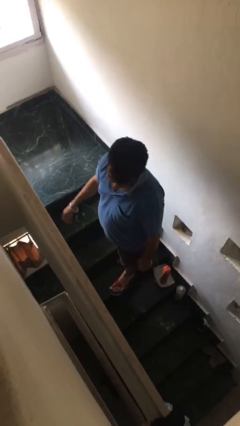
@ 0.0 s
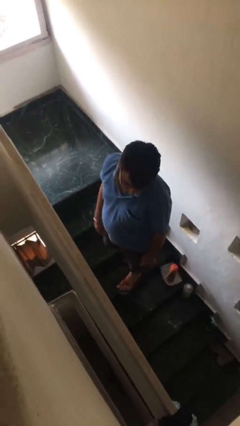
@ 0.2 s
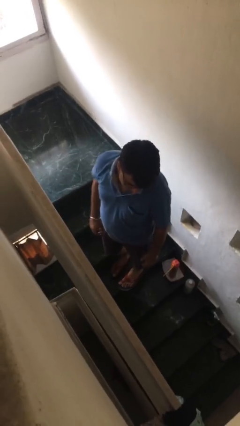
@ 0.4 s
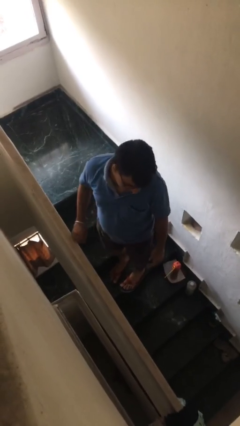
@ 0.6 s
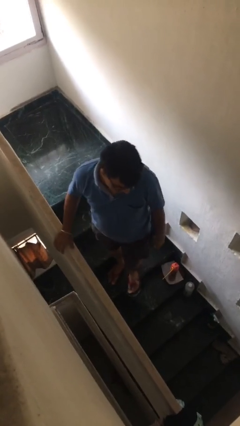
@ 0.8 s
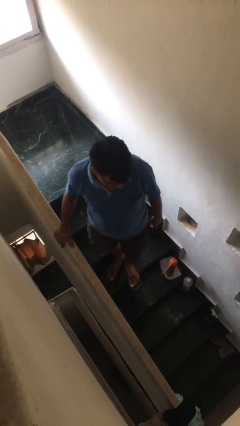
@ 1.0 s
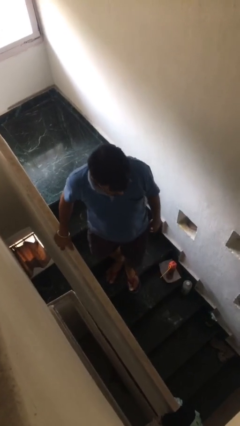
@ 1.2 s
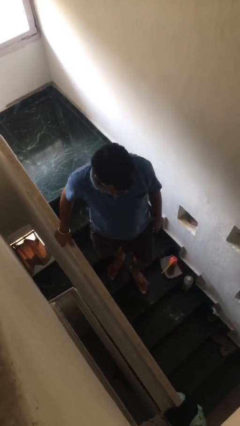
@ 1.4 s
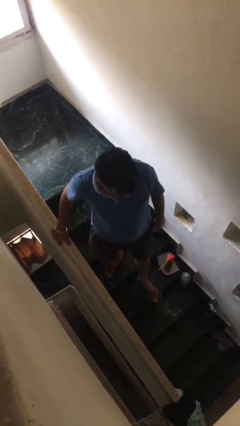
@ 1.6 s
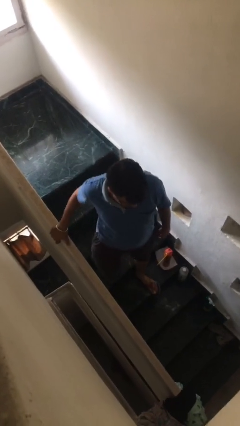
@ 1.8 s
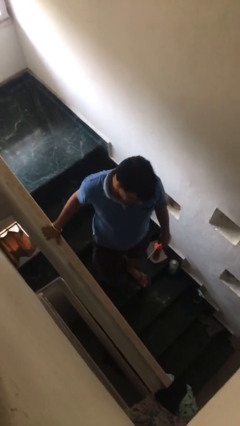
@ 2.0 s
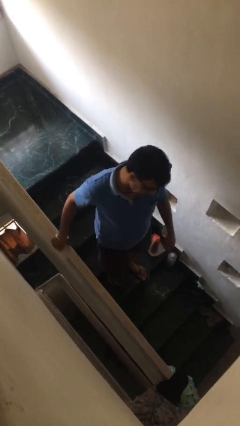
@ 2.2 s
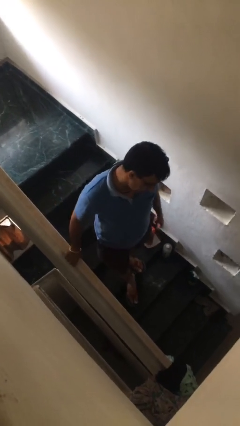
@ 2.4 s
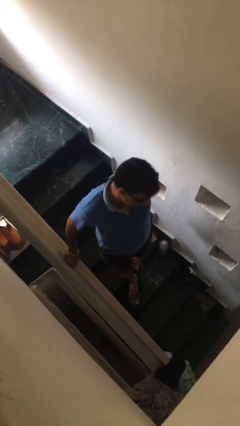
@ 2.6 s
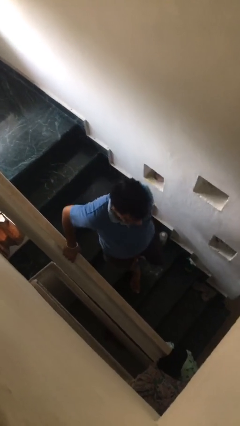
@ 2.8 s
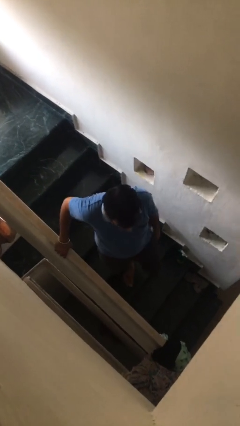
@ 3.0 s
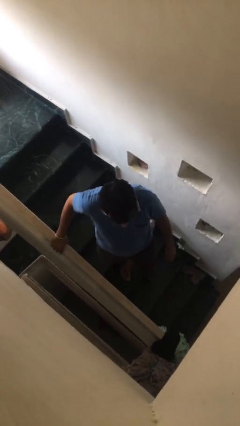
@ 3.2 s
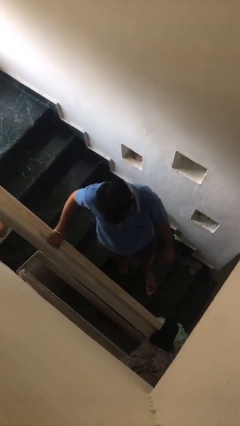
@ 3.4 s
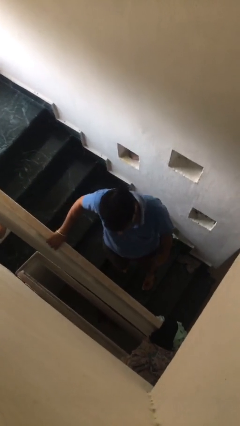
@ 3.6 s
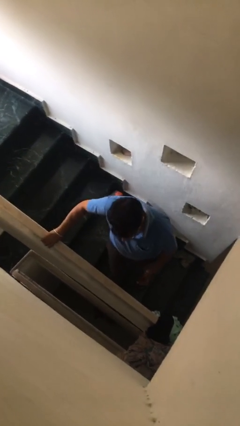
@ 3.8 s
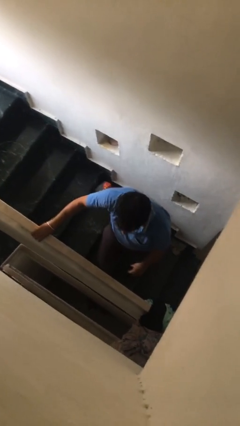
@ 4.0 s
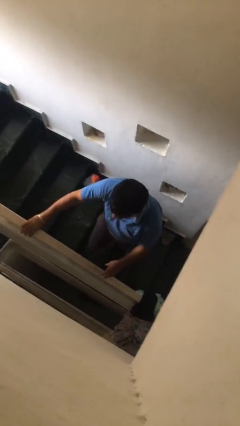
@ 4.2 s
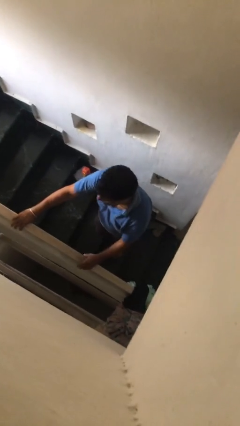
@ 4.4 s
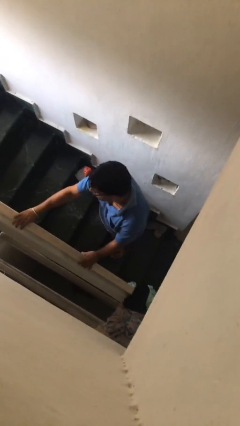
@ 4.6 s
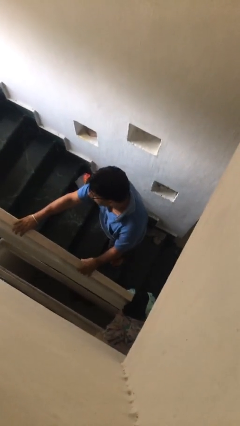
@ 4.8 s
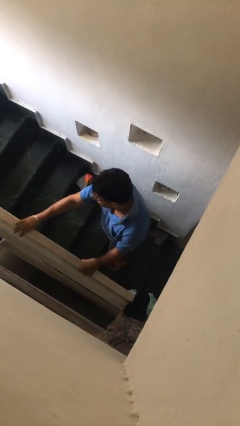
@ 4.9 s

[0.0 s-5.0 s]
person climbs down stairs

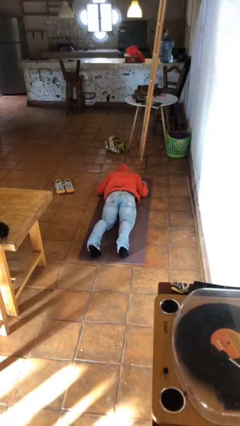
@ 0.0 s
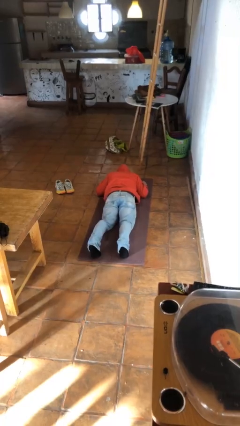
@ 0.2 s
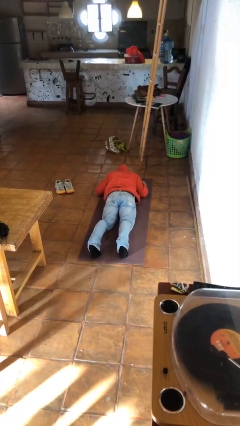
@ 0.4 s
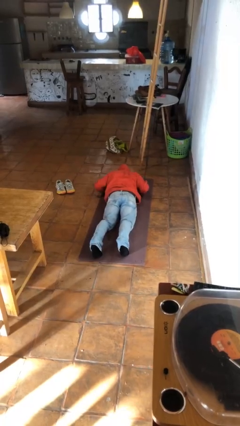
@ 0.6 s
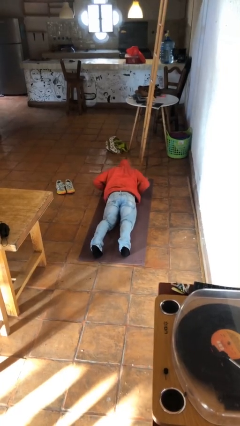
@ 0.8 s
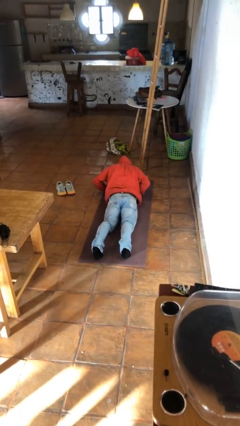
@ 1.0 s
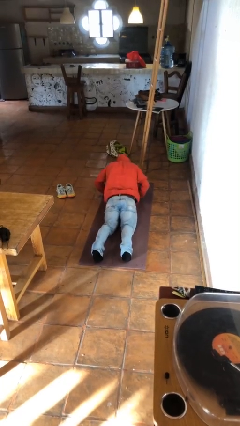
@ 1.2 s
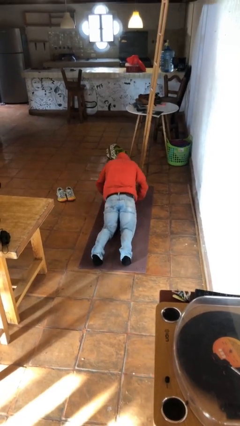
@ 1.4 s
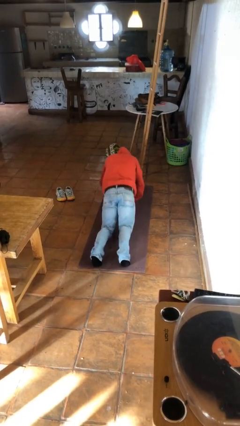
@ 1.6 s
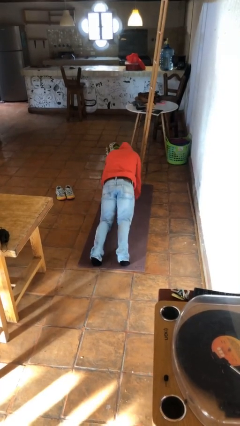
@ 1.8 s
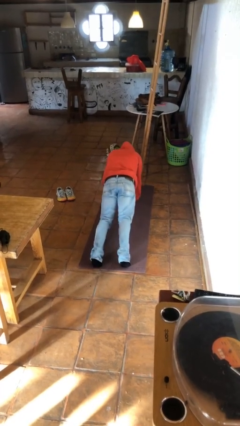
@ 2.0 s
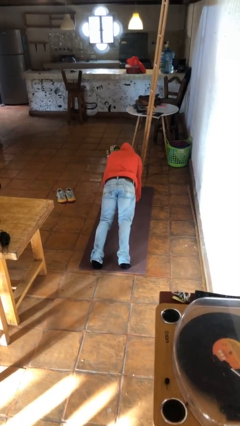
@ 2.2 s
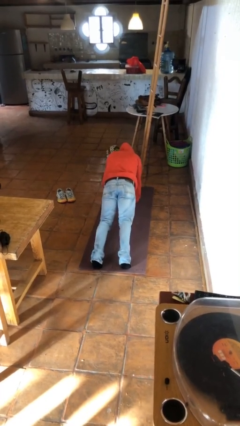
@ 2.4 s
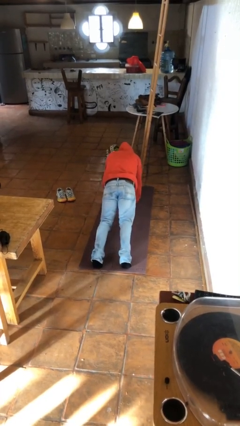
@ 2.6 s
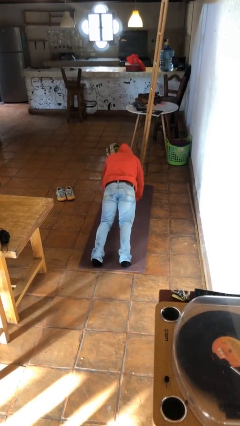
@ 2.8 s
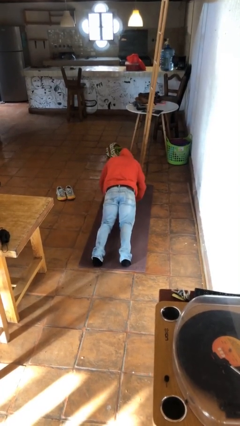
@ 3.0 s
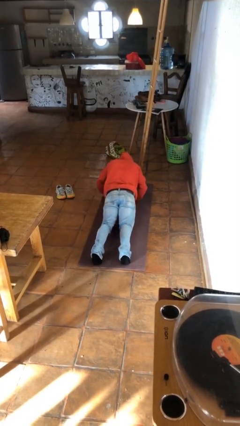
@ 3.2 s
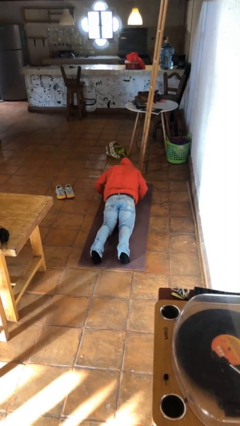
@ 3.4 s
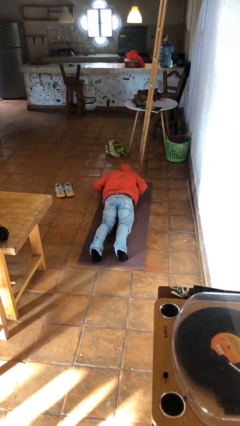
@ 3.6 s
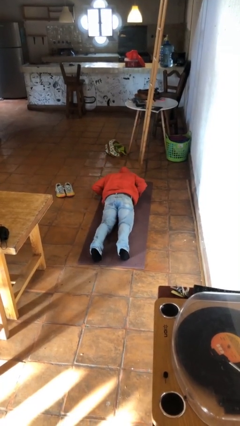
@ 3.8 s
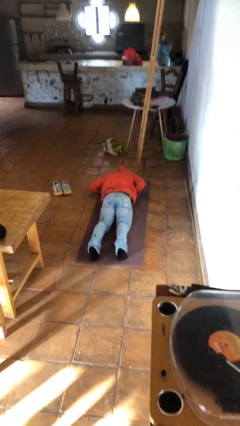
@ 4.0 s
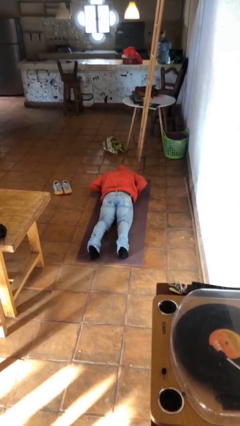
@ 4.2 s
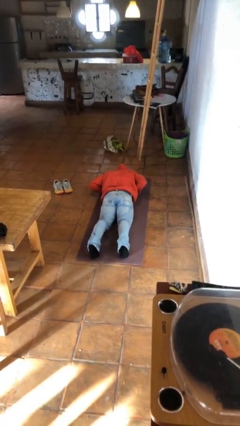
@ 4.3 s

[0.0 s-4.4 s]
person exercises with pushup

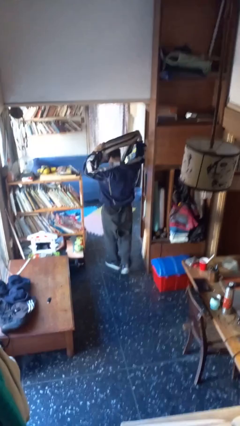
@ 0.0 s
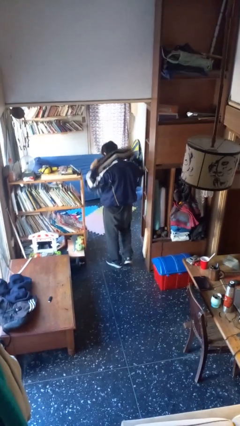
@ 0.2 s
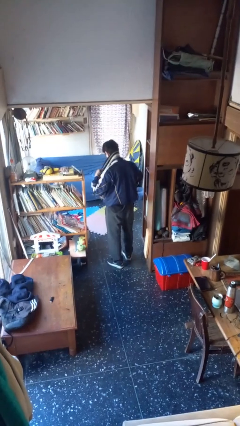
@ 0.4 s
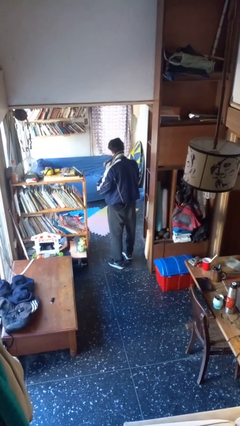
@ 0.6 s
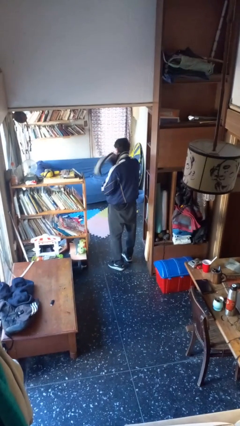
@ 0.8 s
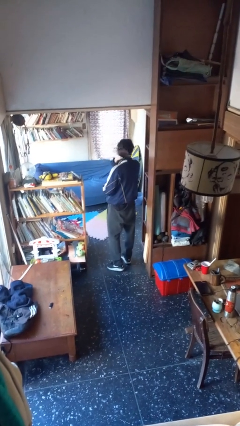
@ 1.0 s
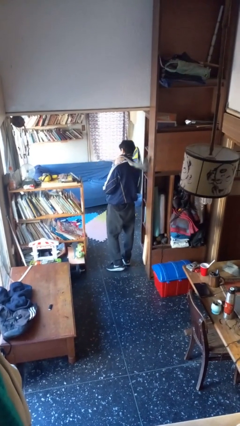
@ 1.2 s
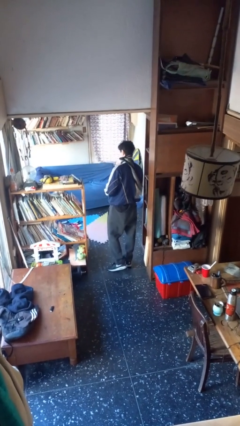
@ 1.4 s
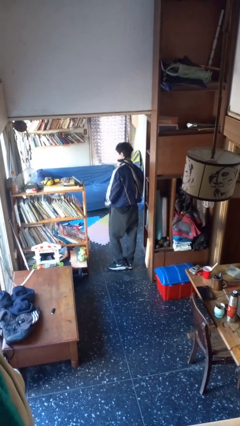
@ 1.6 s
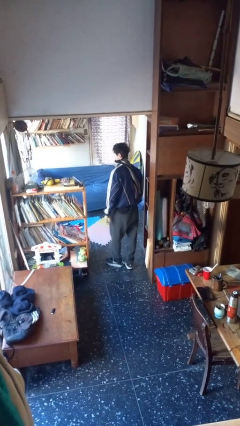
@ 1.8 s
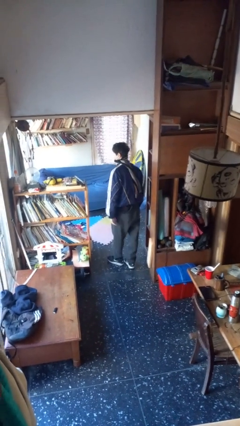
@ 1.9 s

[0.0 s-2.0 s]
person puts on scarf

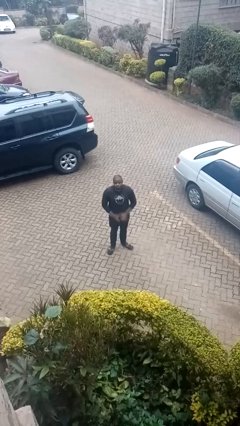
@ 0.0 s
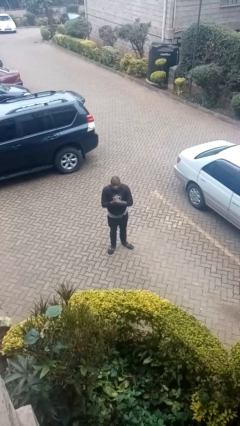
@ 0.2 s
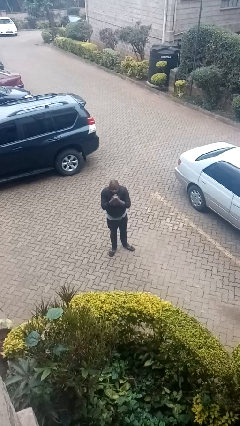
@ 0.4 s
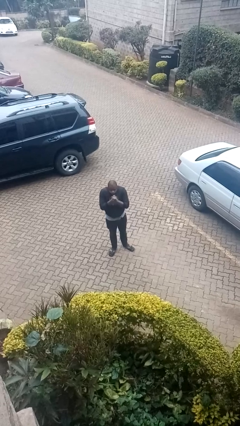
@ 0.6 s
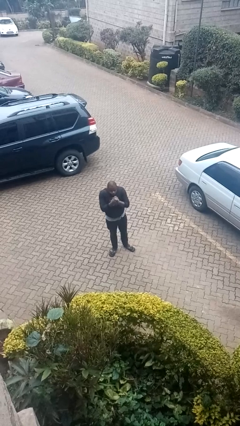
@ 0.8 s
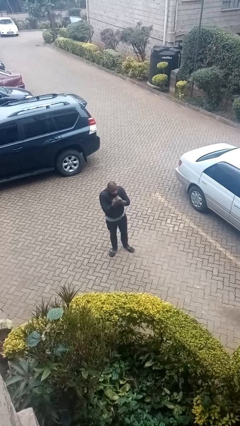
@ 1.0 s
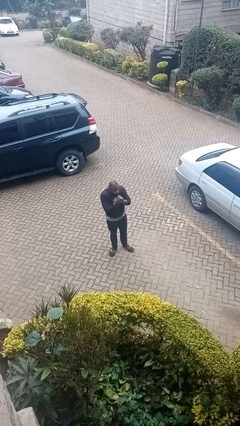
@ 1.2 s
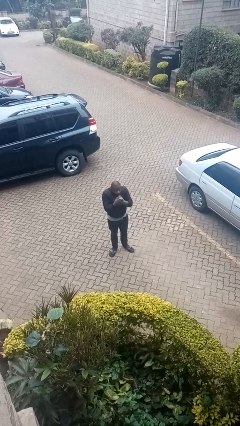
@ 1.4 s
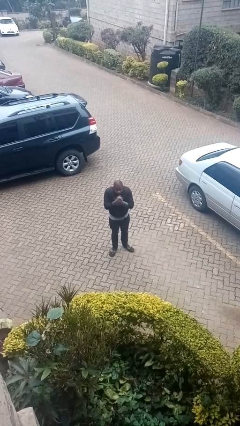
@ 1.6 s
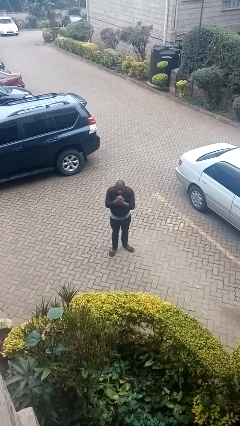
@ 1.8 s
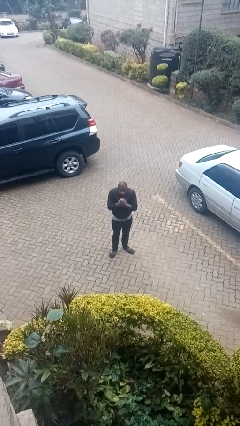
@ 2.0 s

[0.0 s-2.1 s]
person blows into hands

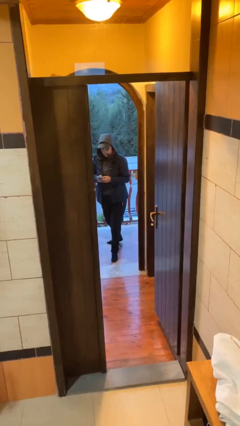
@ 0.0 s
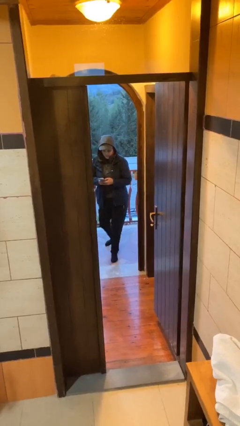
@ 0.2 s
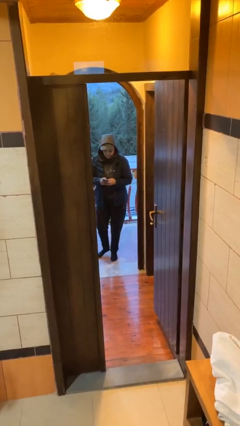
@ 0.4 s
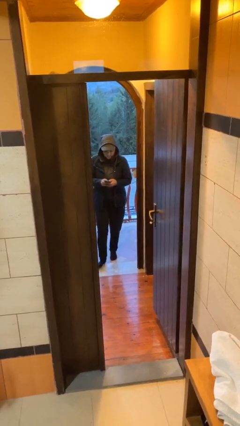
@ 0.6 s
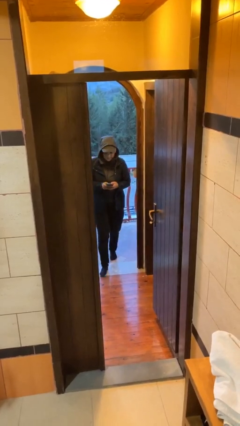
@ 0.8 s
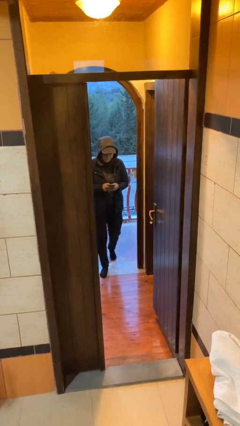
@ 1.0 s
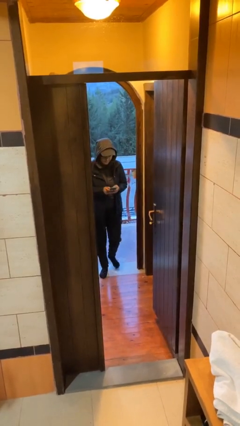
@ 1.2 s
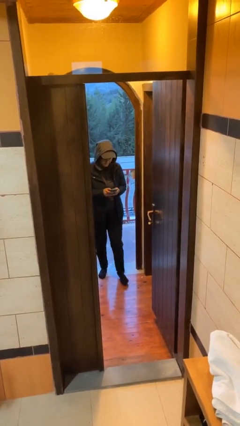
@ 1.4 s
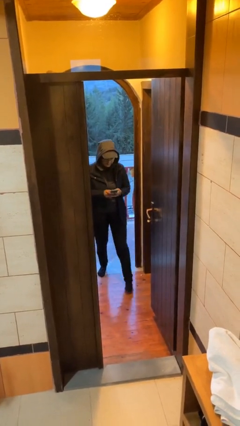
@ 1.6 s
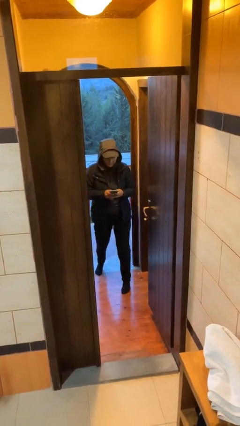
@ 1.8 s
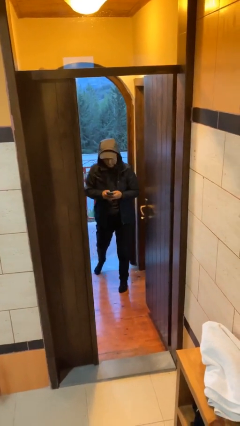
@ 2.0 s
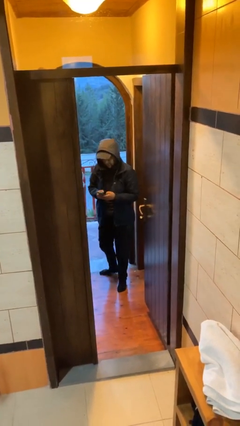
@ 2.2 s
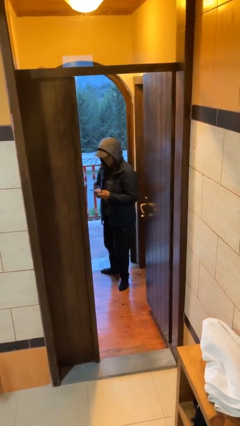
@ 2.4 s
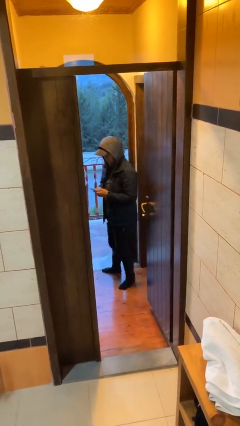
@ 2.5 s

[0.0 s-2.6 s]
person enters scene through structure

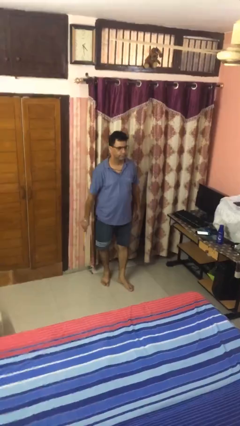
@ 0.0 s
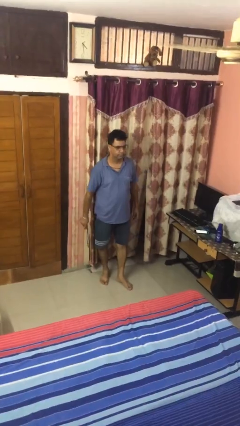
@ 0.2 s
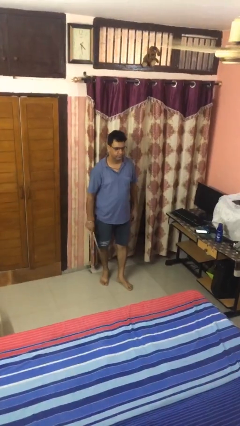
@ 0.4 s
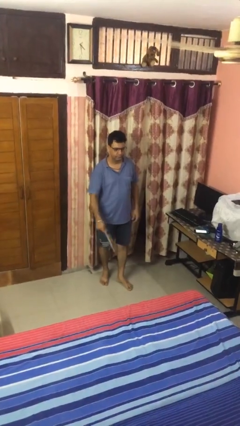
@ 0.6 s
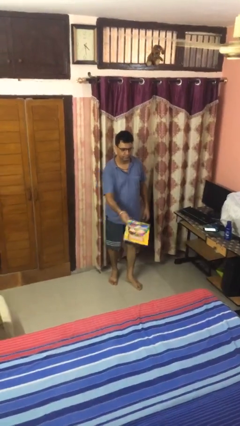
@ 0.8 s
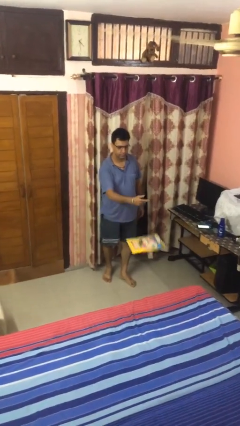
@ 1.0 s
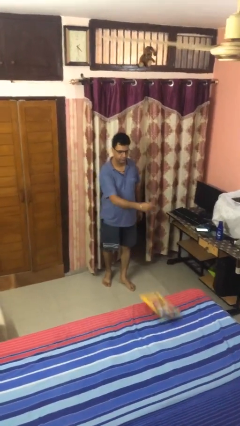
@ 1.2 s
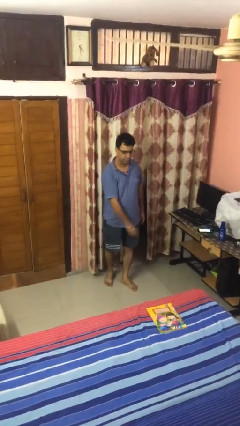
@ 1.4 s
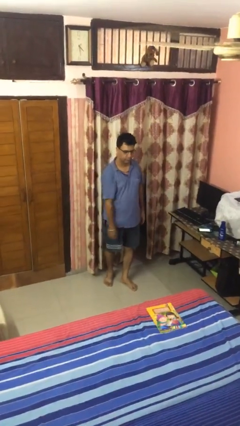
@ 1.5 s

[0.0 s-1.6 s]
person throws object on bed
